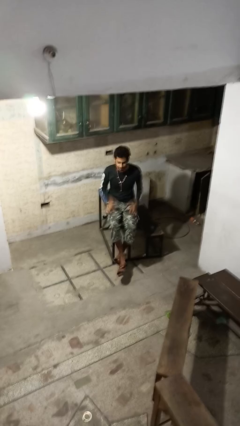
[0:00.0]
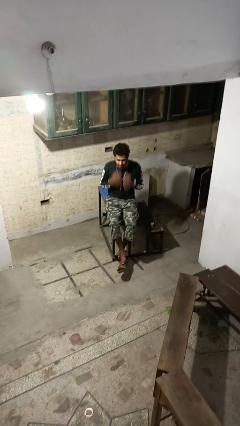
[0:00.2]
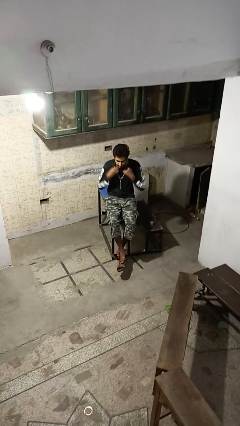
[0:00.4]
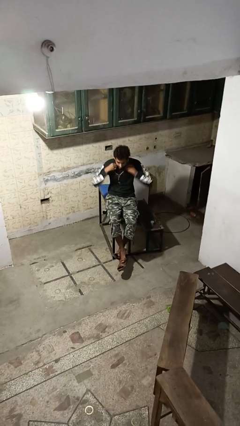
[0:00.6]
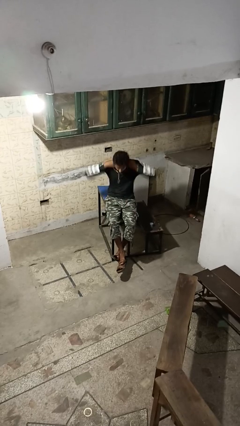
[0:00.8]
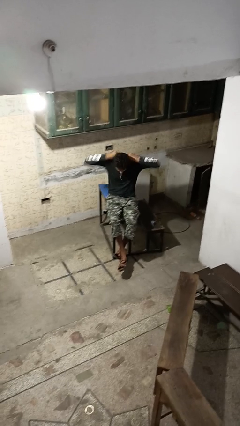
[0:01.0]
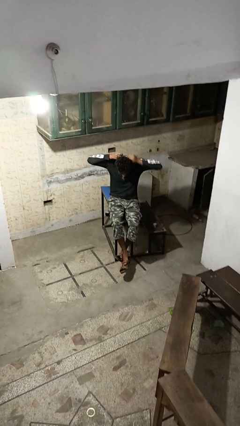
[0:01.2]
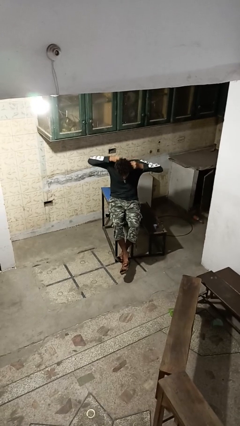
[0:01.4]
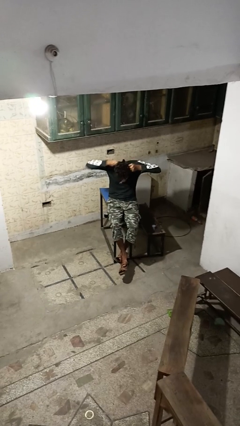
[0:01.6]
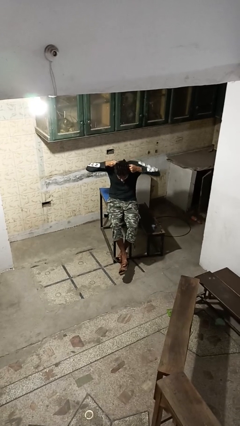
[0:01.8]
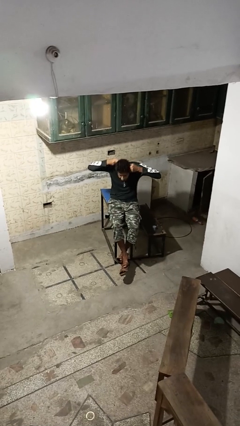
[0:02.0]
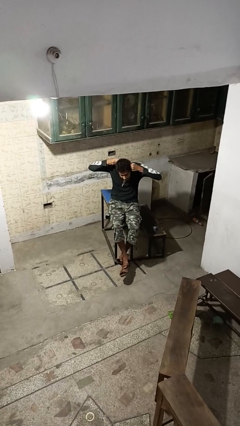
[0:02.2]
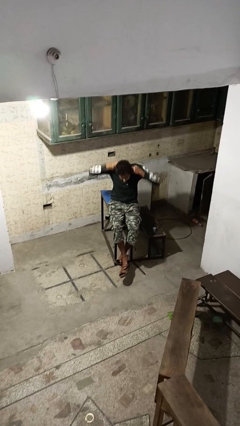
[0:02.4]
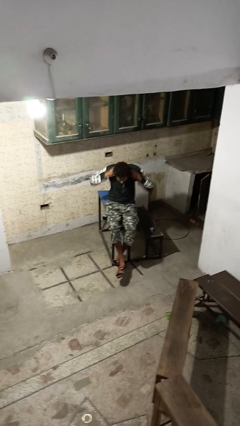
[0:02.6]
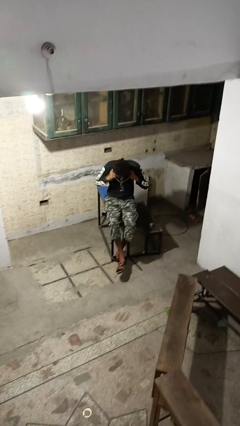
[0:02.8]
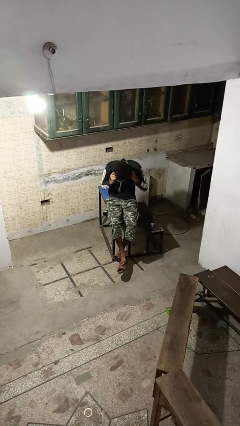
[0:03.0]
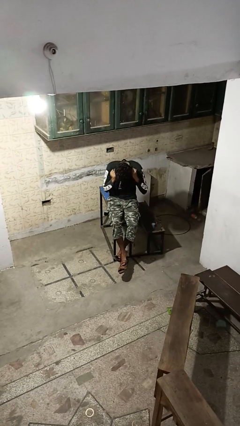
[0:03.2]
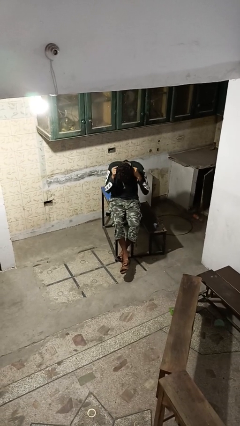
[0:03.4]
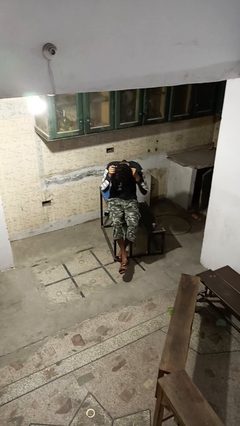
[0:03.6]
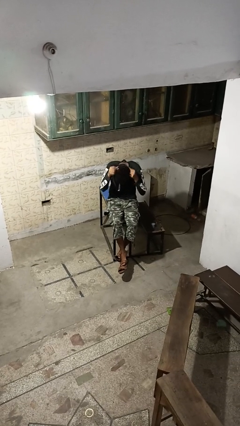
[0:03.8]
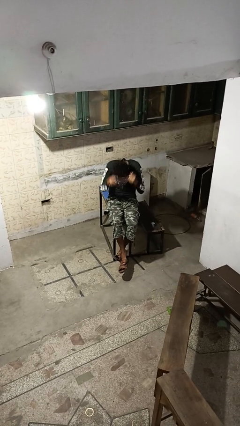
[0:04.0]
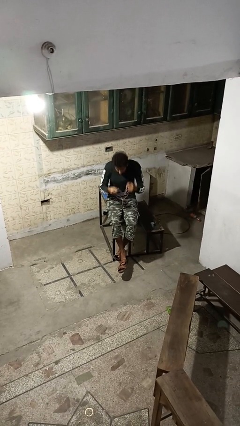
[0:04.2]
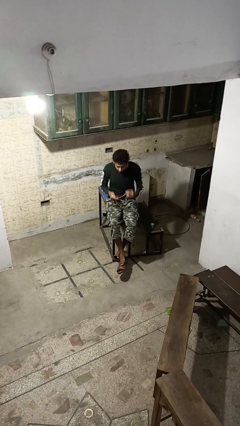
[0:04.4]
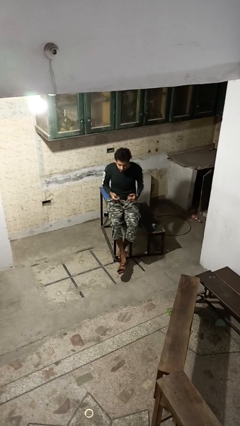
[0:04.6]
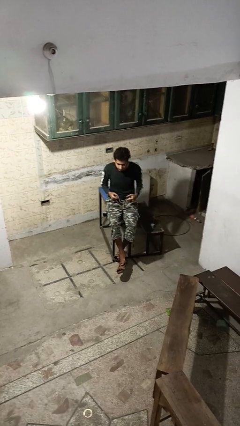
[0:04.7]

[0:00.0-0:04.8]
person takes off necklace

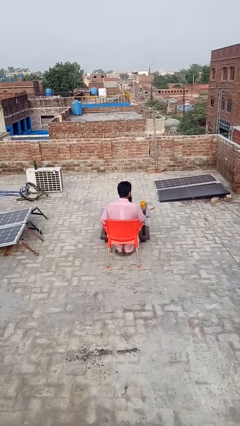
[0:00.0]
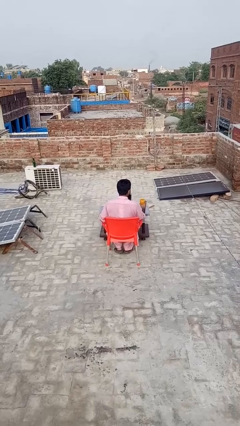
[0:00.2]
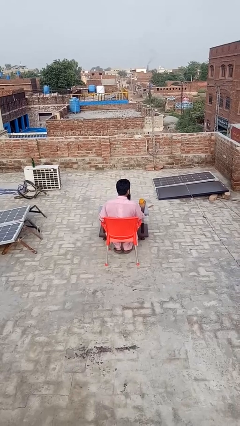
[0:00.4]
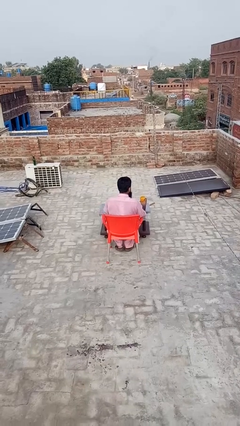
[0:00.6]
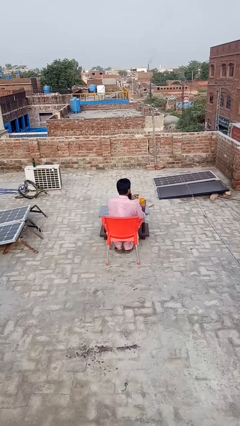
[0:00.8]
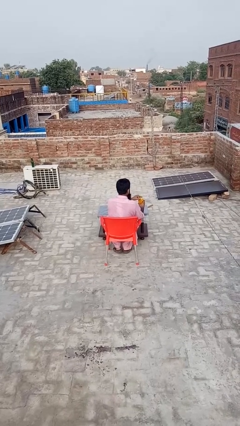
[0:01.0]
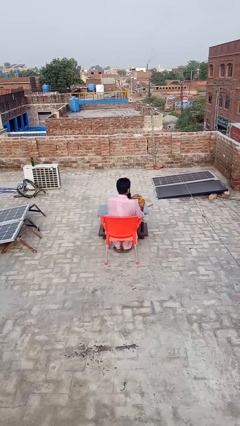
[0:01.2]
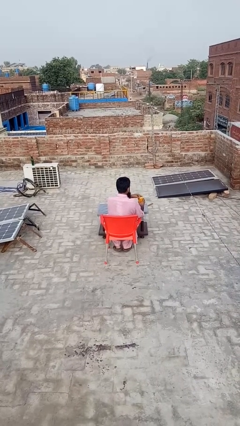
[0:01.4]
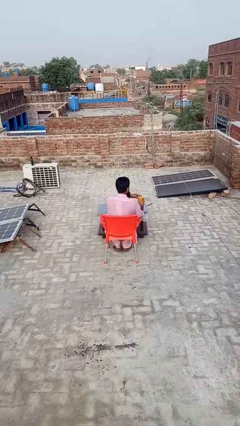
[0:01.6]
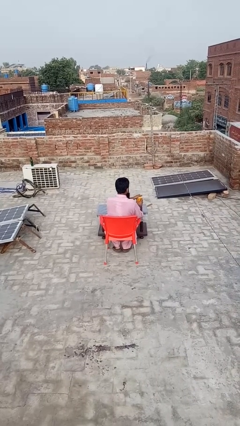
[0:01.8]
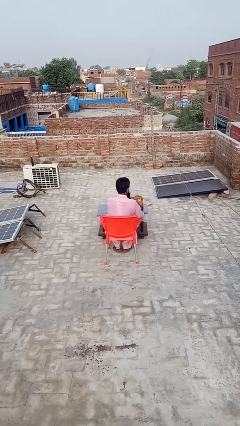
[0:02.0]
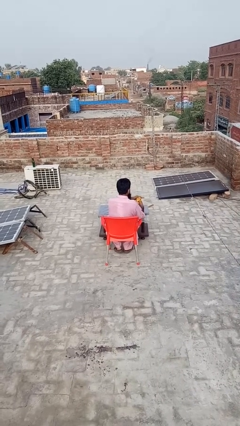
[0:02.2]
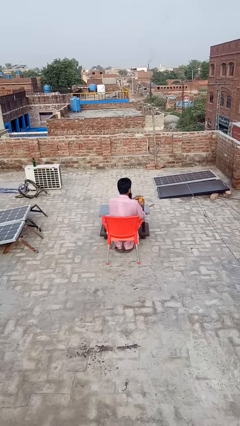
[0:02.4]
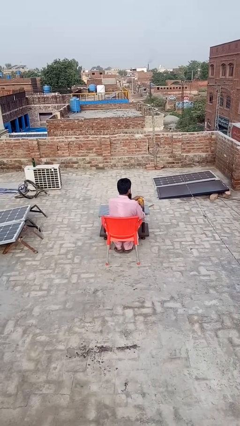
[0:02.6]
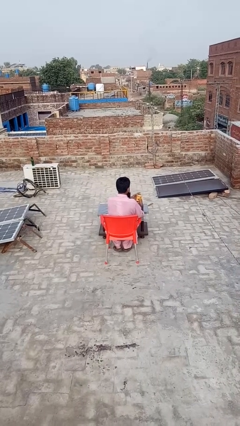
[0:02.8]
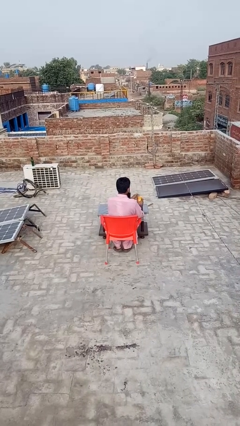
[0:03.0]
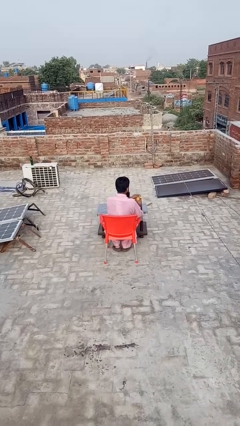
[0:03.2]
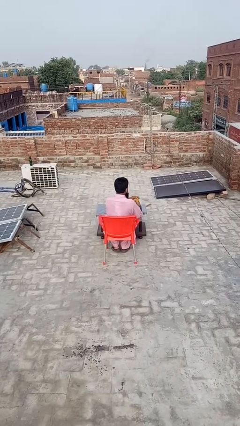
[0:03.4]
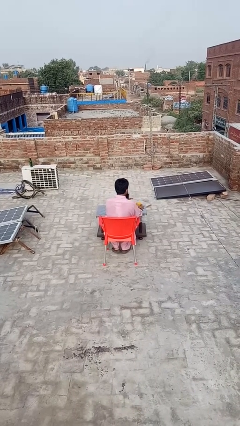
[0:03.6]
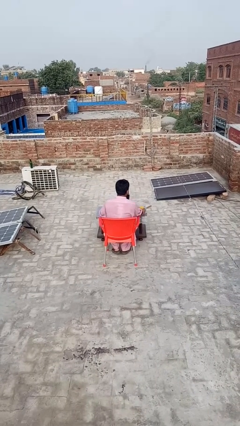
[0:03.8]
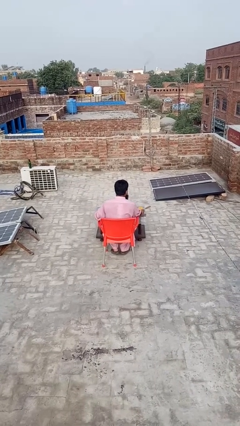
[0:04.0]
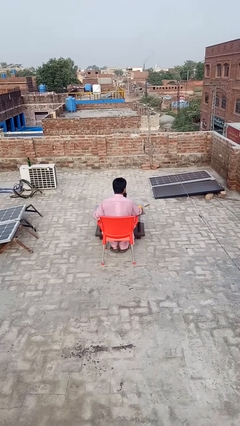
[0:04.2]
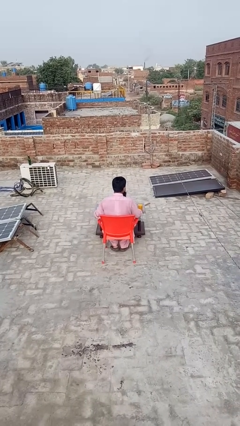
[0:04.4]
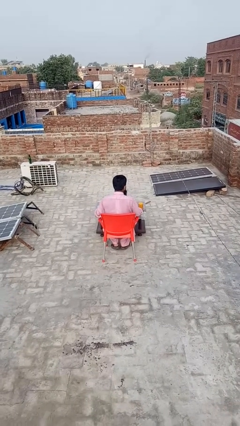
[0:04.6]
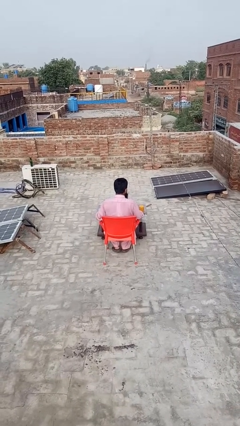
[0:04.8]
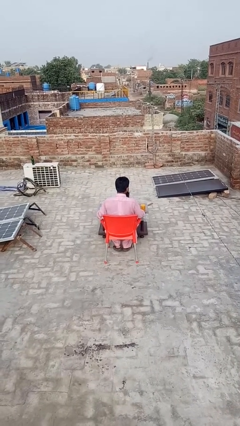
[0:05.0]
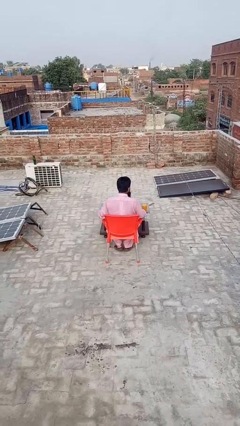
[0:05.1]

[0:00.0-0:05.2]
person closes jar

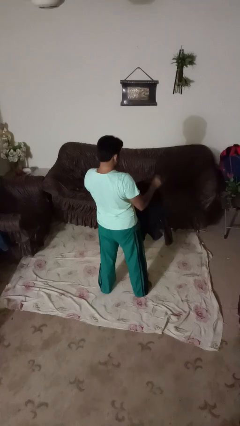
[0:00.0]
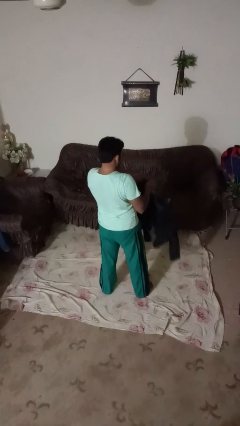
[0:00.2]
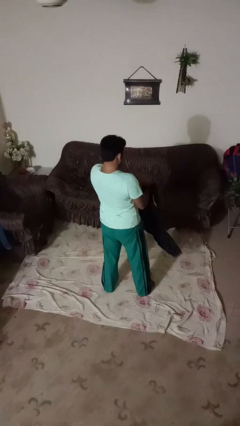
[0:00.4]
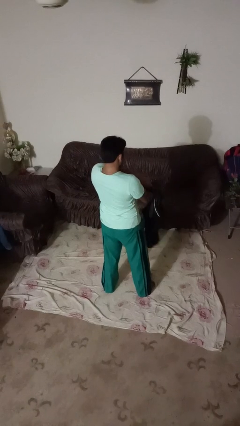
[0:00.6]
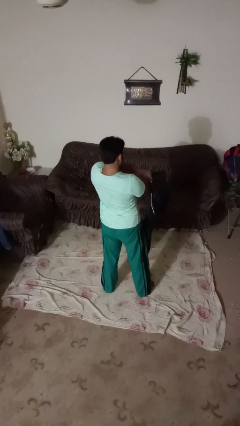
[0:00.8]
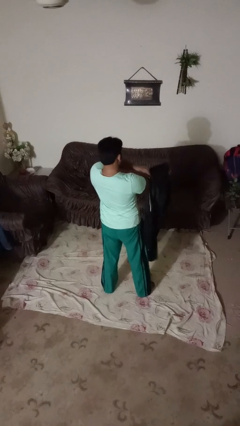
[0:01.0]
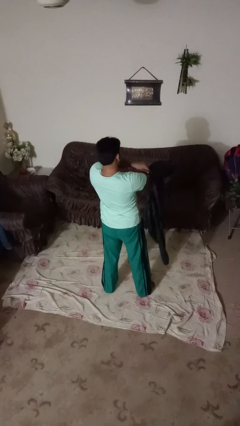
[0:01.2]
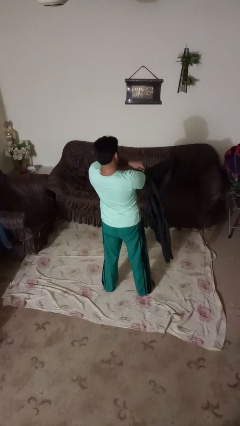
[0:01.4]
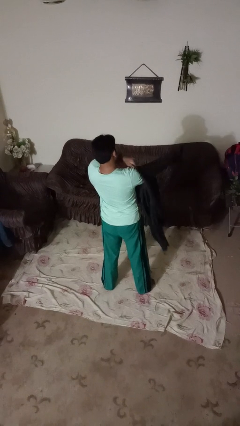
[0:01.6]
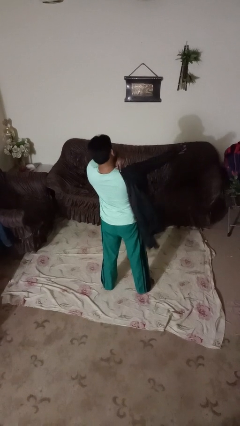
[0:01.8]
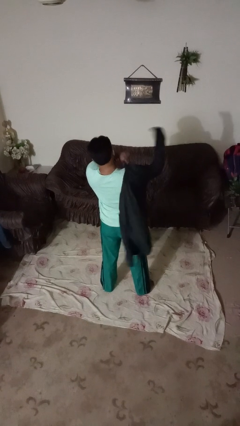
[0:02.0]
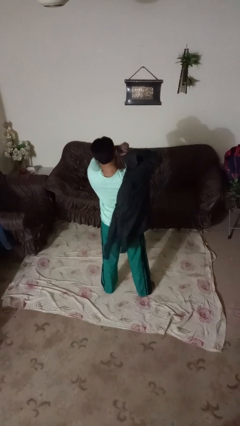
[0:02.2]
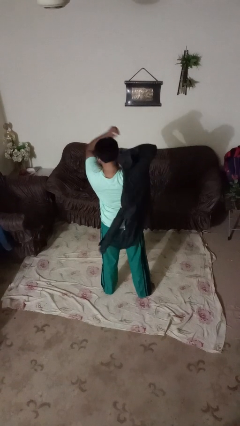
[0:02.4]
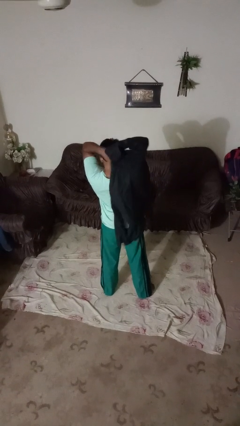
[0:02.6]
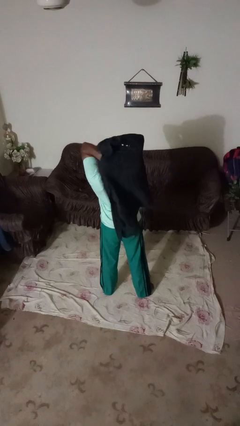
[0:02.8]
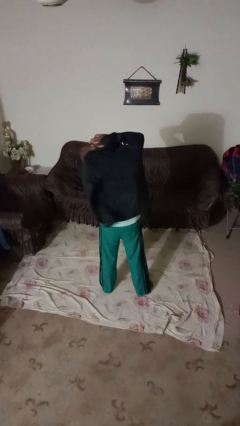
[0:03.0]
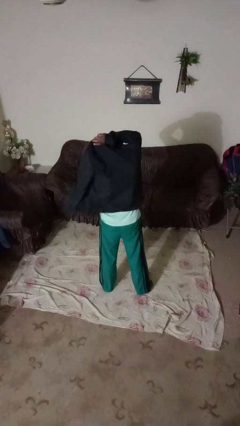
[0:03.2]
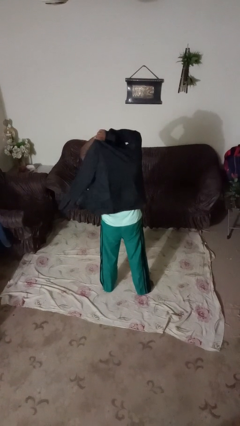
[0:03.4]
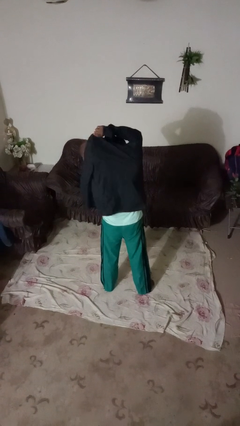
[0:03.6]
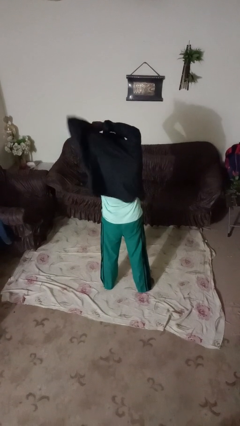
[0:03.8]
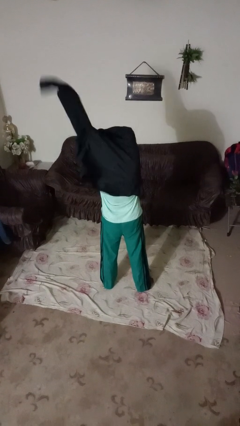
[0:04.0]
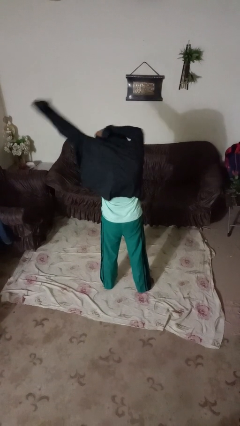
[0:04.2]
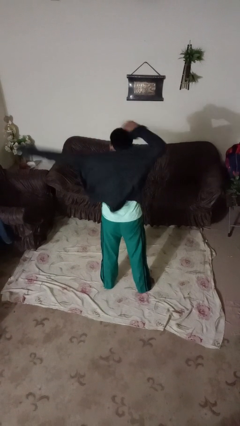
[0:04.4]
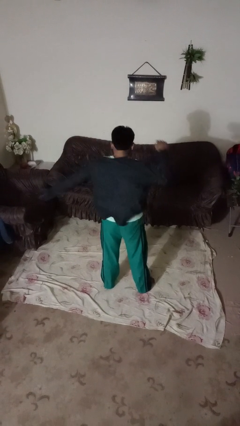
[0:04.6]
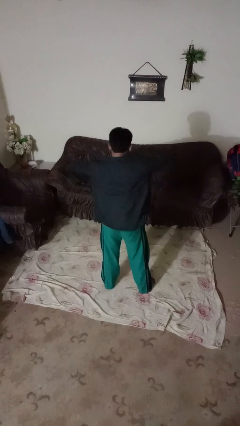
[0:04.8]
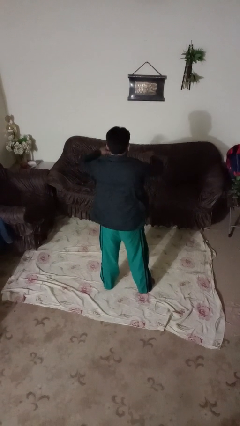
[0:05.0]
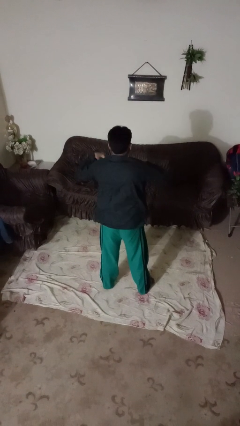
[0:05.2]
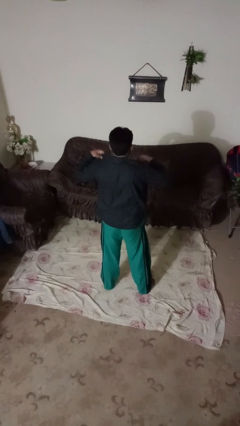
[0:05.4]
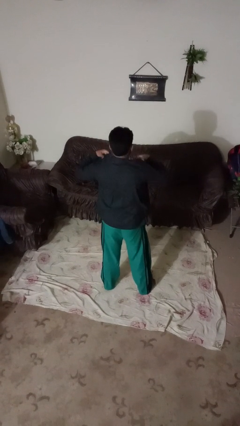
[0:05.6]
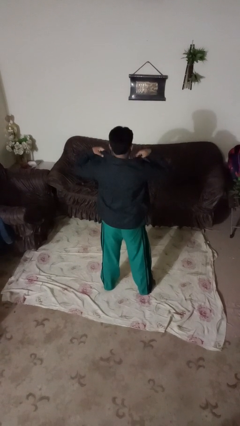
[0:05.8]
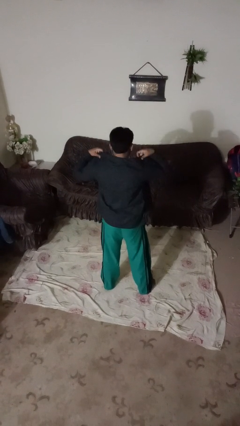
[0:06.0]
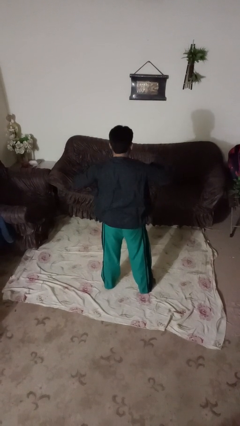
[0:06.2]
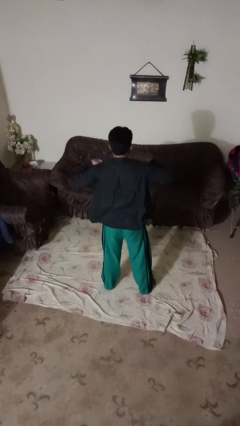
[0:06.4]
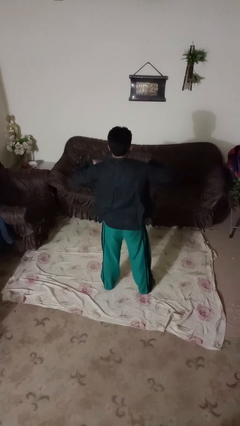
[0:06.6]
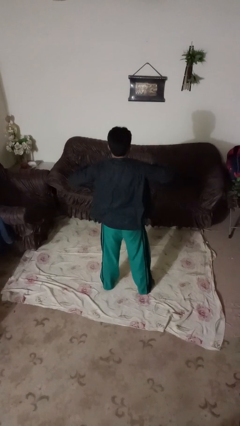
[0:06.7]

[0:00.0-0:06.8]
person puts on shirt

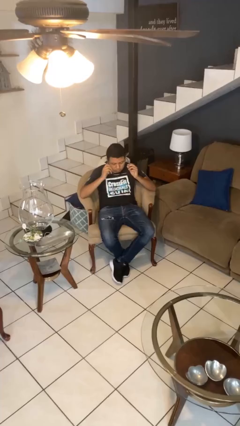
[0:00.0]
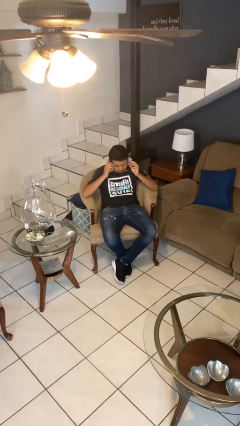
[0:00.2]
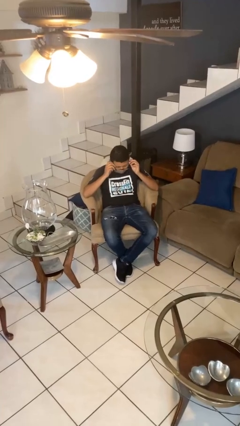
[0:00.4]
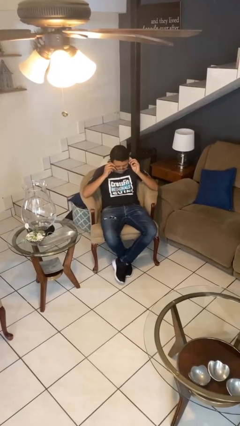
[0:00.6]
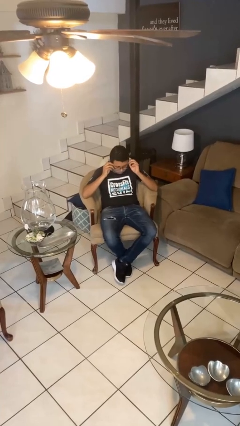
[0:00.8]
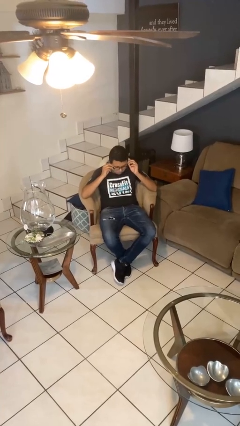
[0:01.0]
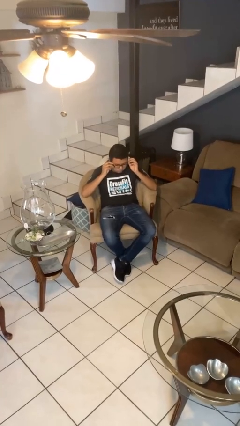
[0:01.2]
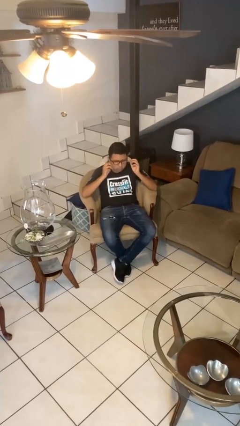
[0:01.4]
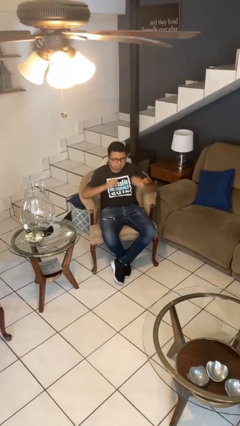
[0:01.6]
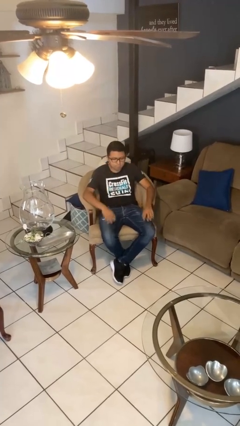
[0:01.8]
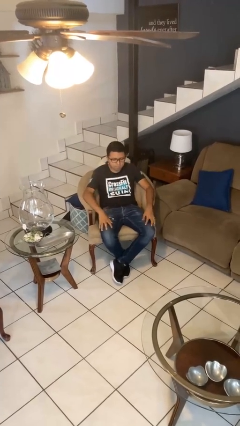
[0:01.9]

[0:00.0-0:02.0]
person puts on glasses
